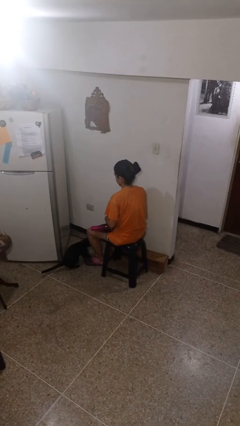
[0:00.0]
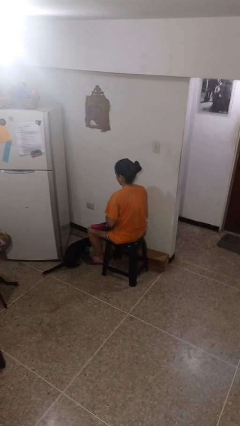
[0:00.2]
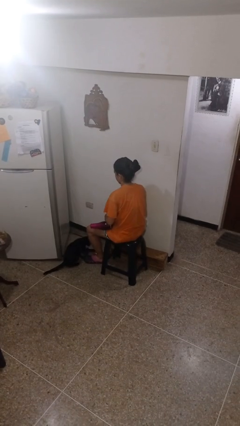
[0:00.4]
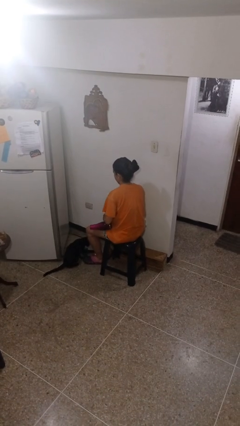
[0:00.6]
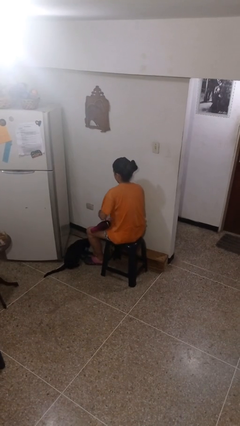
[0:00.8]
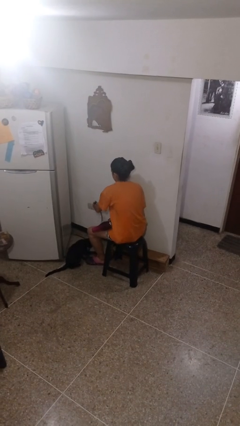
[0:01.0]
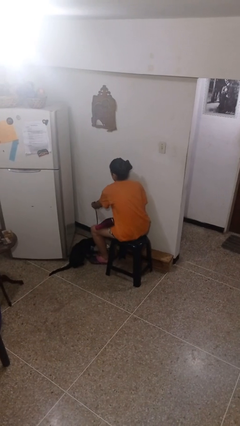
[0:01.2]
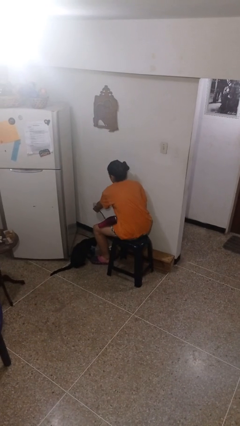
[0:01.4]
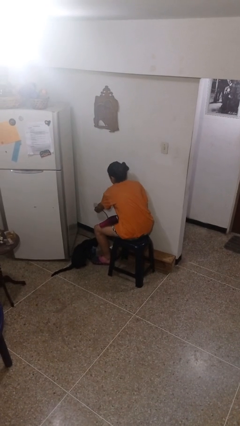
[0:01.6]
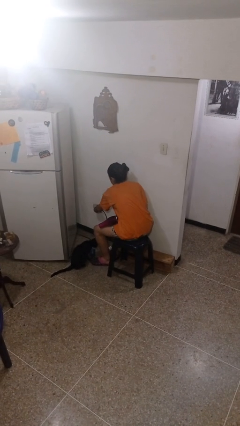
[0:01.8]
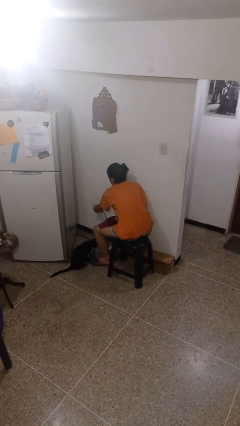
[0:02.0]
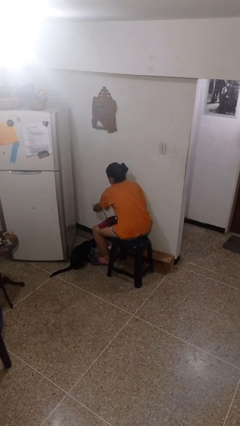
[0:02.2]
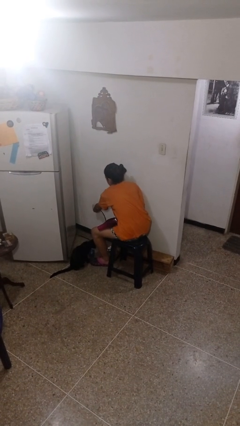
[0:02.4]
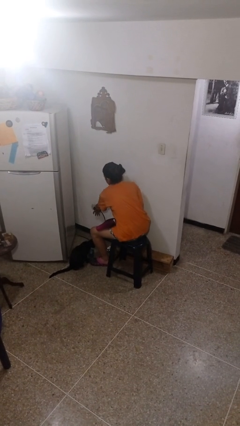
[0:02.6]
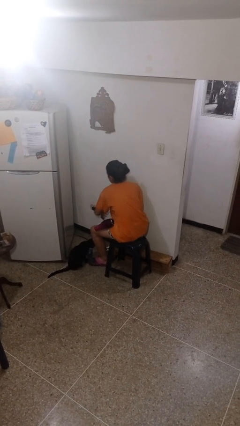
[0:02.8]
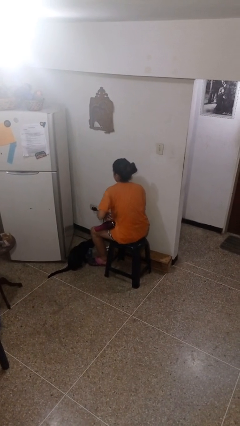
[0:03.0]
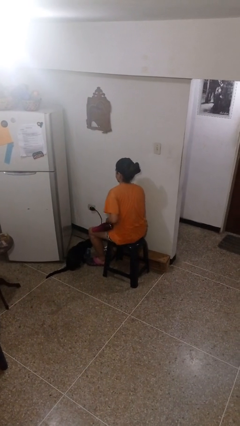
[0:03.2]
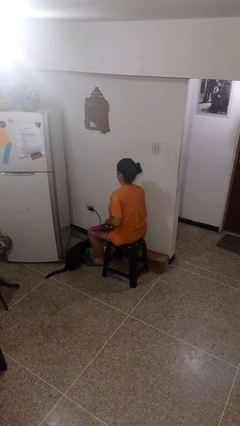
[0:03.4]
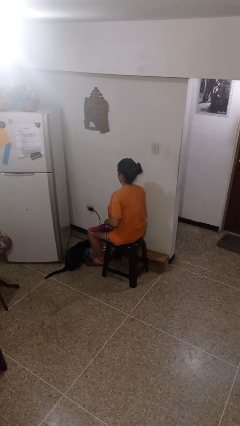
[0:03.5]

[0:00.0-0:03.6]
person plugs into electrical socket

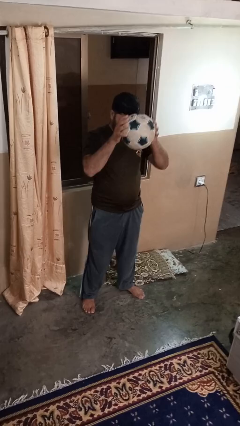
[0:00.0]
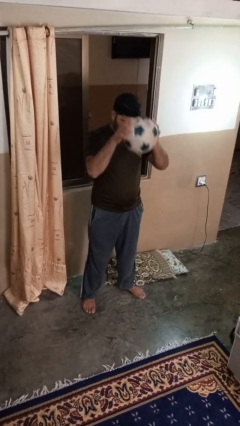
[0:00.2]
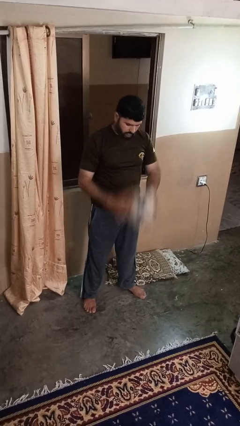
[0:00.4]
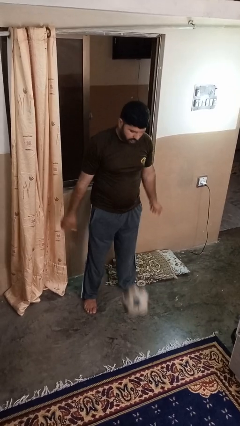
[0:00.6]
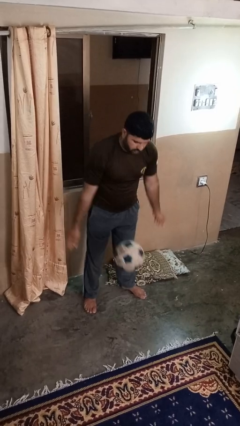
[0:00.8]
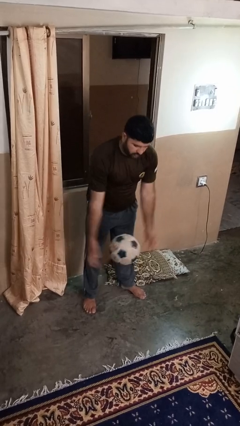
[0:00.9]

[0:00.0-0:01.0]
person bounces ball on floor

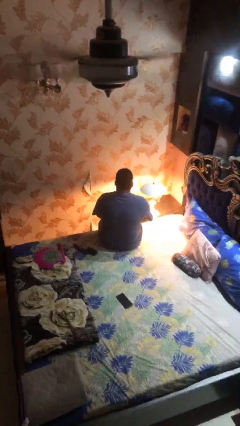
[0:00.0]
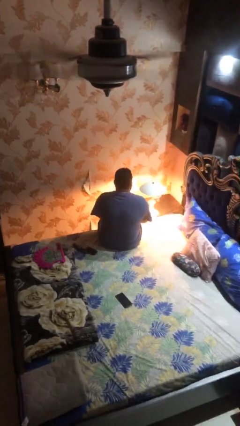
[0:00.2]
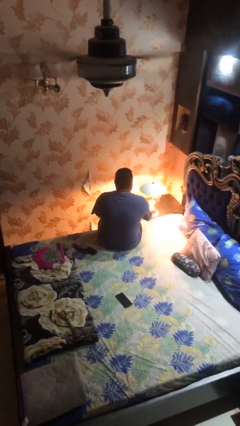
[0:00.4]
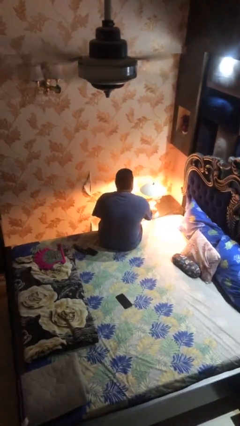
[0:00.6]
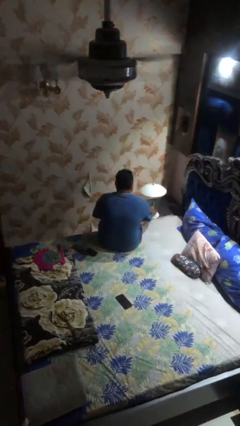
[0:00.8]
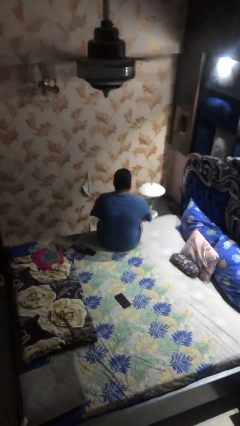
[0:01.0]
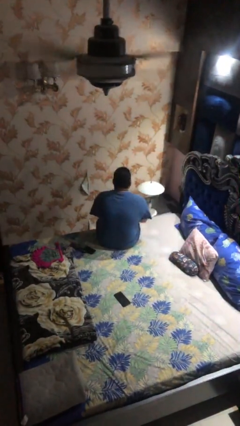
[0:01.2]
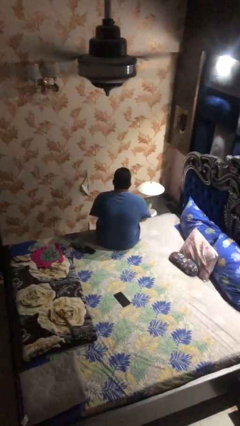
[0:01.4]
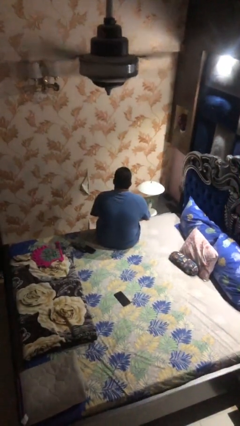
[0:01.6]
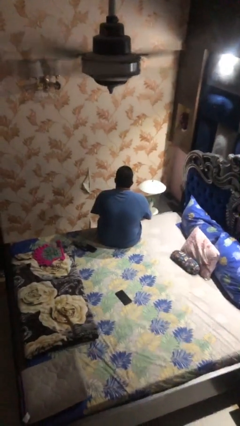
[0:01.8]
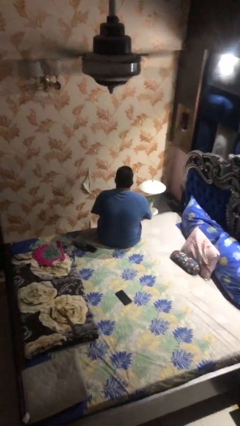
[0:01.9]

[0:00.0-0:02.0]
person turns off lamp

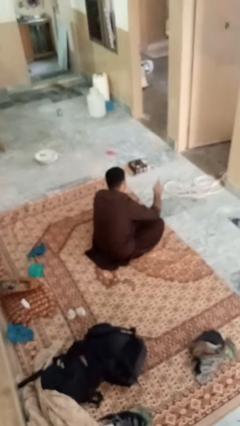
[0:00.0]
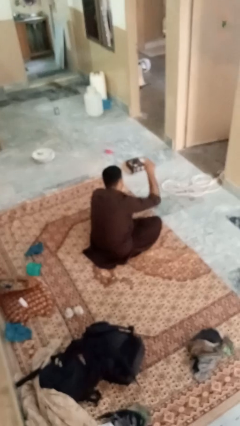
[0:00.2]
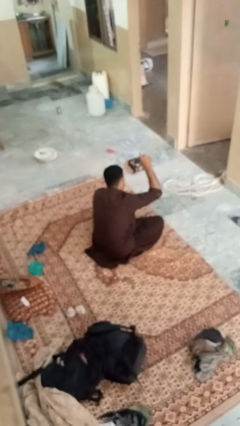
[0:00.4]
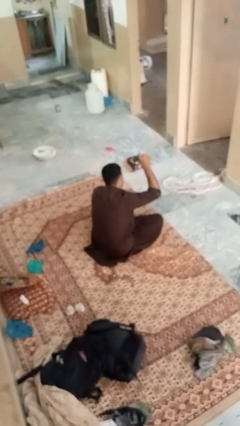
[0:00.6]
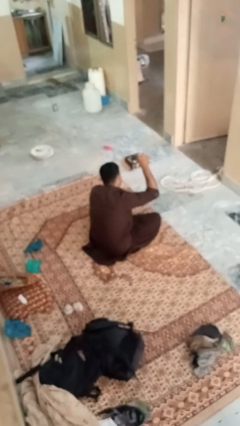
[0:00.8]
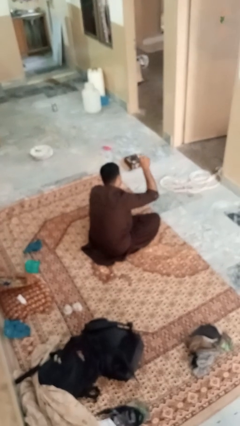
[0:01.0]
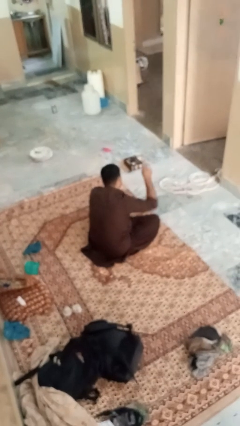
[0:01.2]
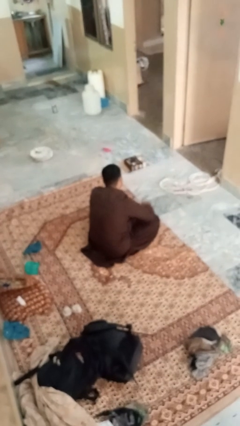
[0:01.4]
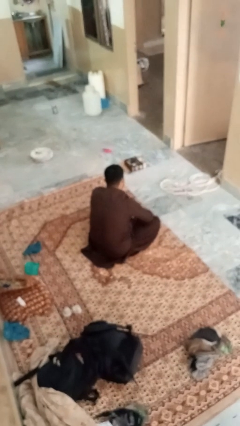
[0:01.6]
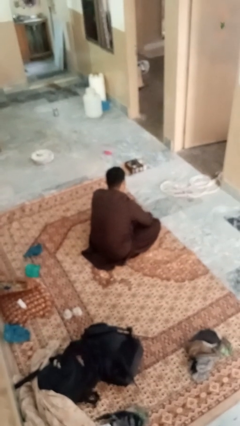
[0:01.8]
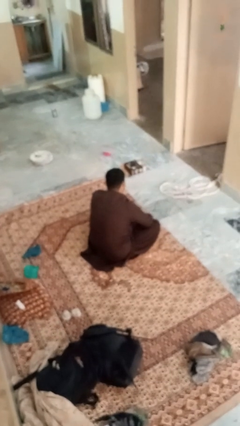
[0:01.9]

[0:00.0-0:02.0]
person gestures number one

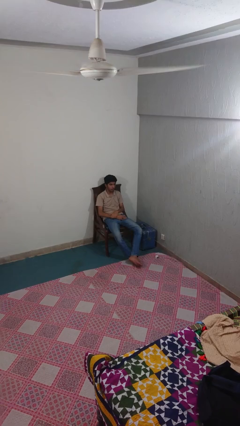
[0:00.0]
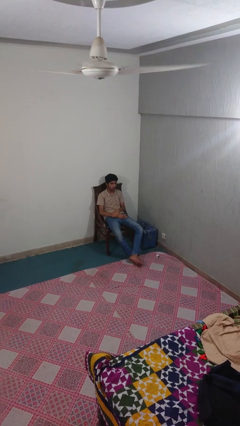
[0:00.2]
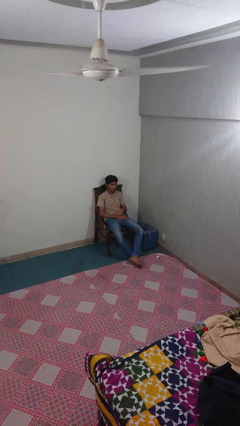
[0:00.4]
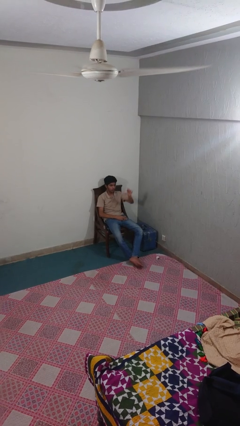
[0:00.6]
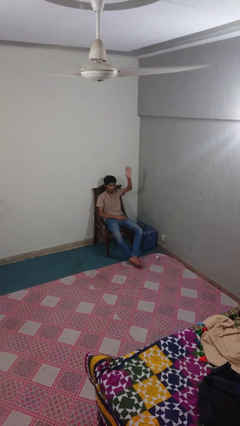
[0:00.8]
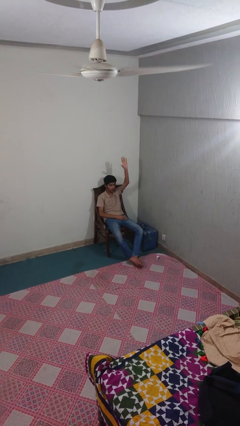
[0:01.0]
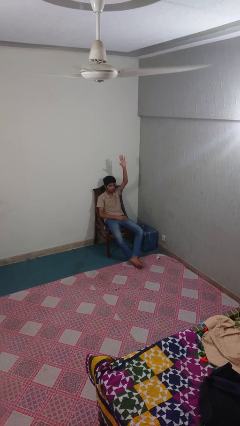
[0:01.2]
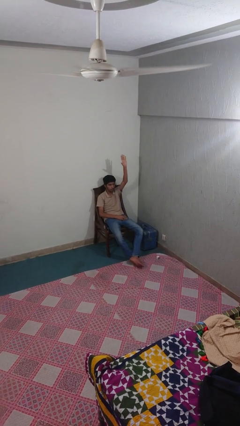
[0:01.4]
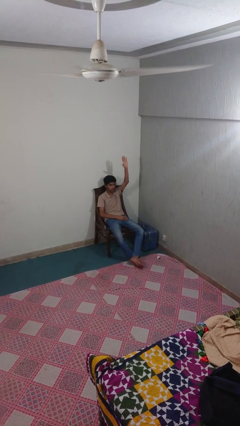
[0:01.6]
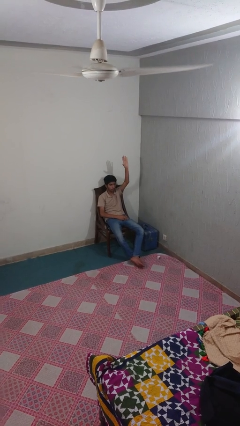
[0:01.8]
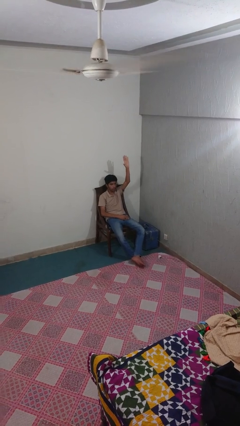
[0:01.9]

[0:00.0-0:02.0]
person gestures raise hand

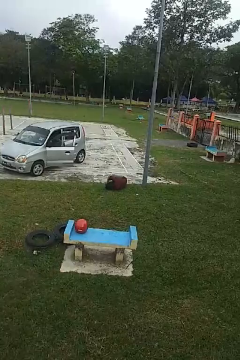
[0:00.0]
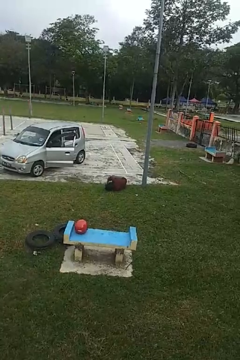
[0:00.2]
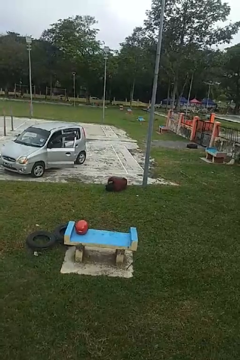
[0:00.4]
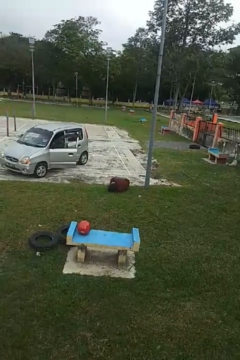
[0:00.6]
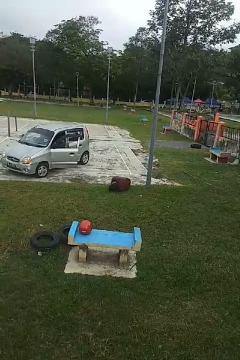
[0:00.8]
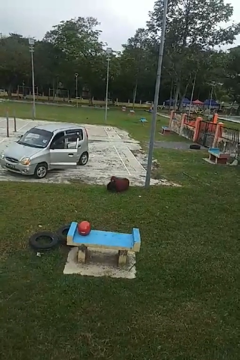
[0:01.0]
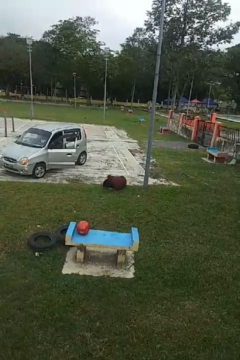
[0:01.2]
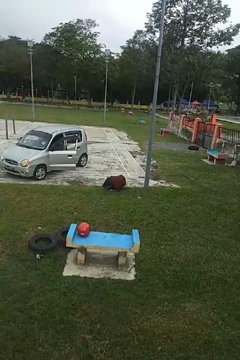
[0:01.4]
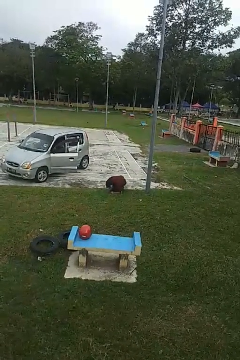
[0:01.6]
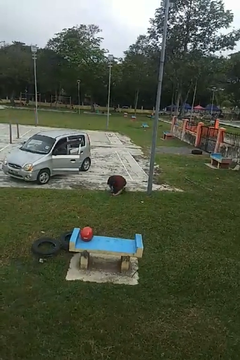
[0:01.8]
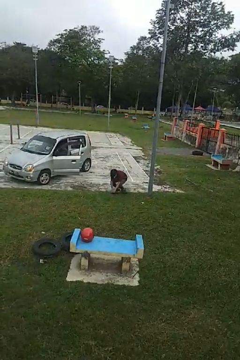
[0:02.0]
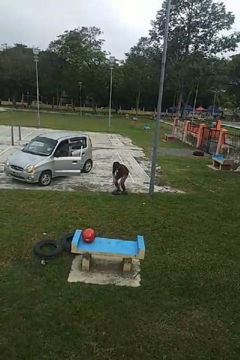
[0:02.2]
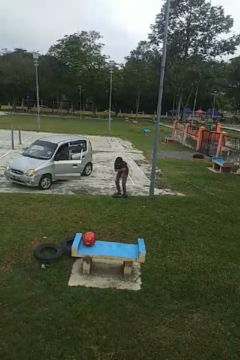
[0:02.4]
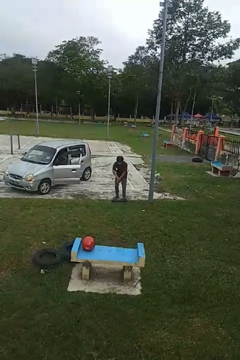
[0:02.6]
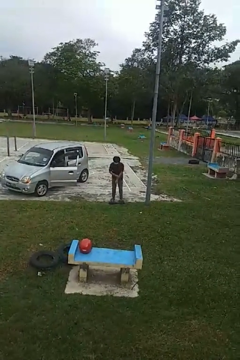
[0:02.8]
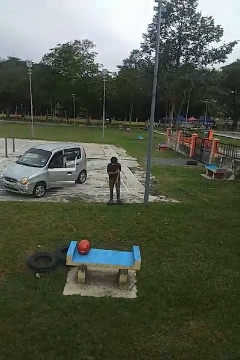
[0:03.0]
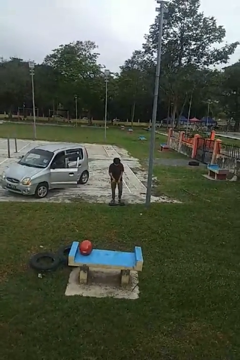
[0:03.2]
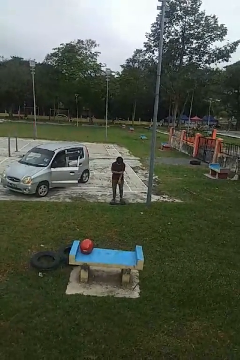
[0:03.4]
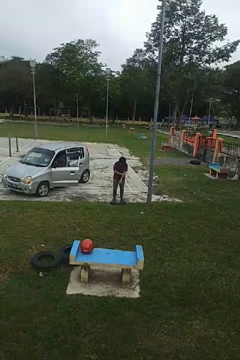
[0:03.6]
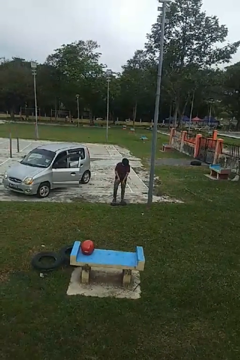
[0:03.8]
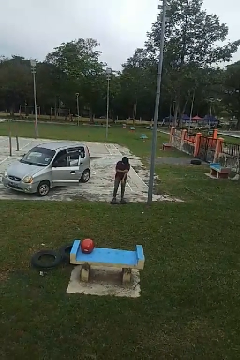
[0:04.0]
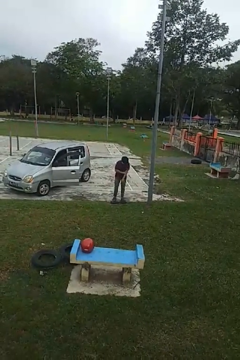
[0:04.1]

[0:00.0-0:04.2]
person stands up from floor

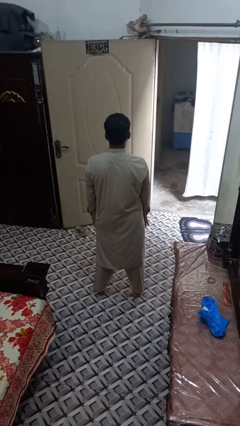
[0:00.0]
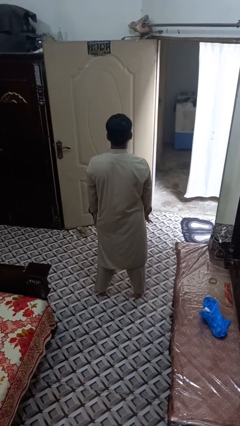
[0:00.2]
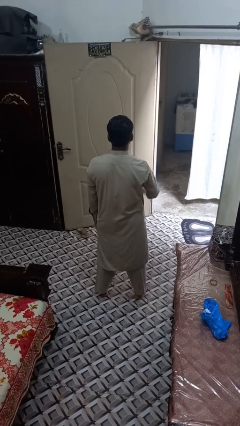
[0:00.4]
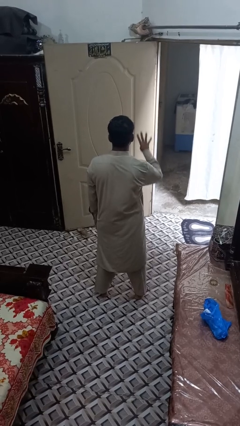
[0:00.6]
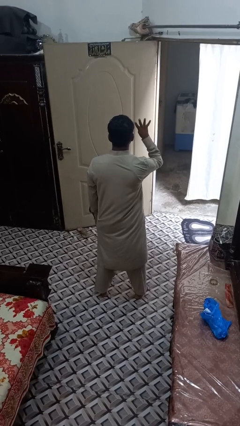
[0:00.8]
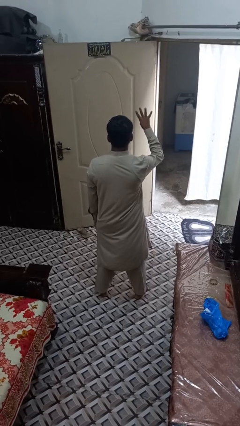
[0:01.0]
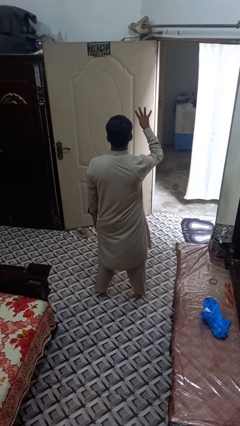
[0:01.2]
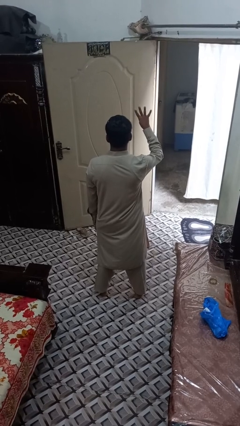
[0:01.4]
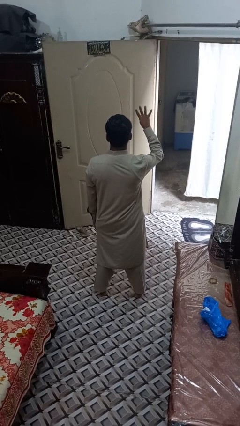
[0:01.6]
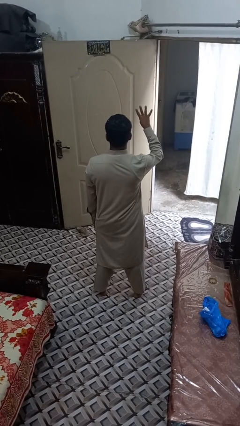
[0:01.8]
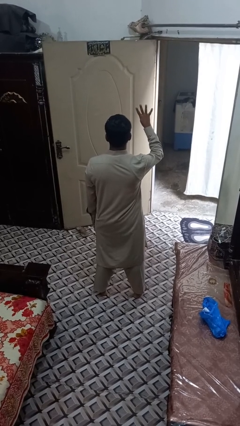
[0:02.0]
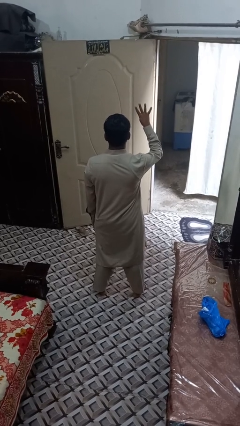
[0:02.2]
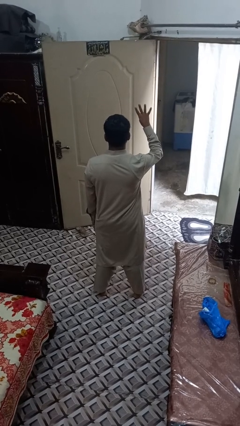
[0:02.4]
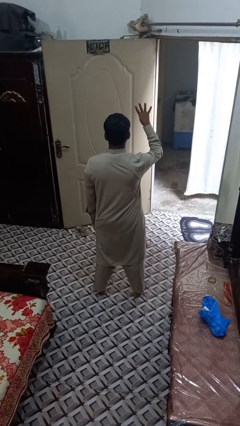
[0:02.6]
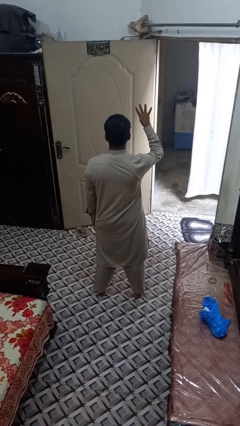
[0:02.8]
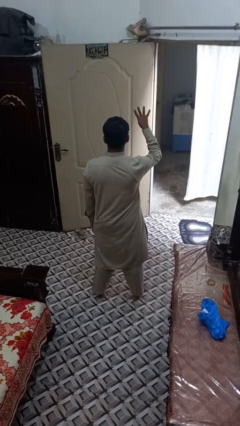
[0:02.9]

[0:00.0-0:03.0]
person gestures number four
